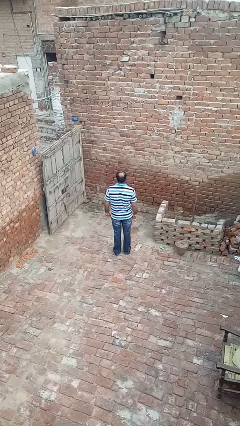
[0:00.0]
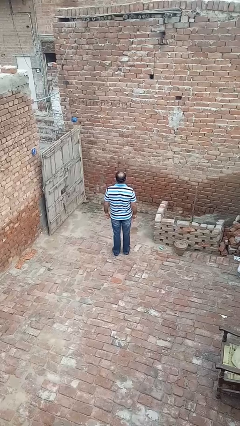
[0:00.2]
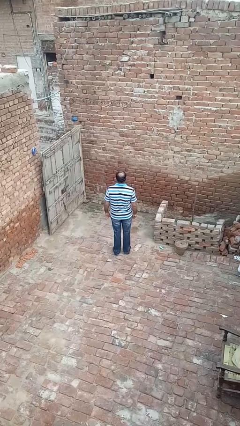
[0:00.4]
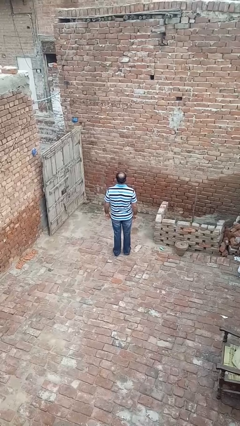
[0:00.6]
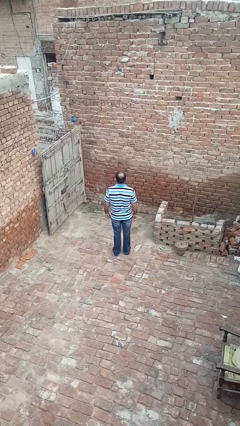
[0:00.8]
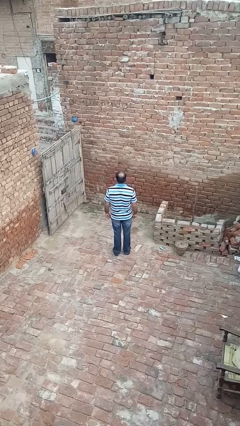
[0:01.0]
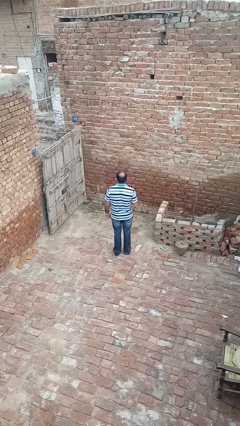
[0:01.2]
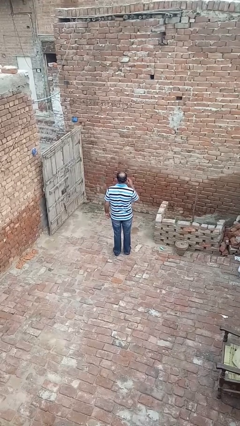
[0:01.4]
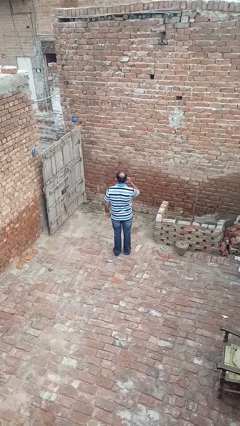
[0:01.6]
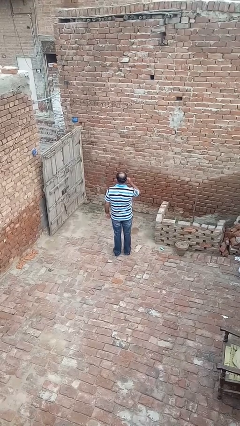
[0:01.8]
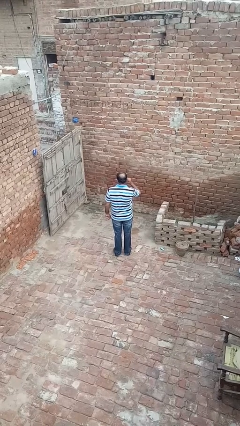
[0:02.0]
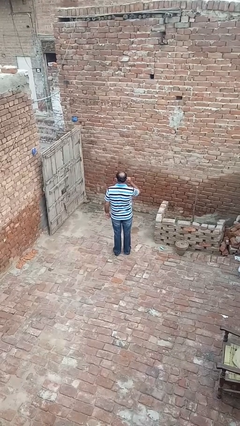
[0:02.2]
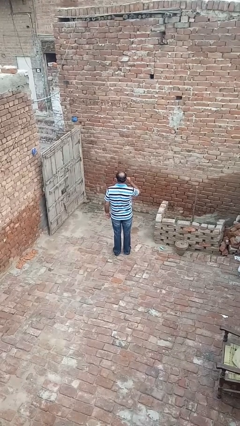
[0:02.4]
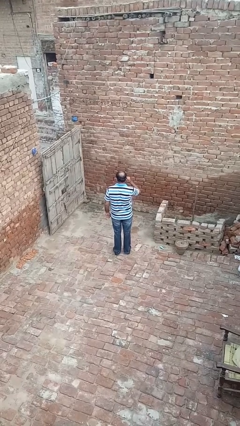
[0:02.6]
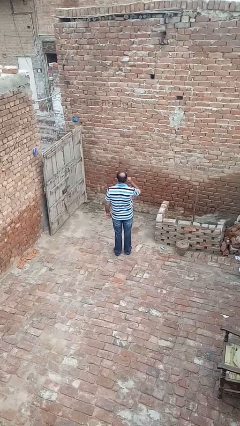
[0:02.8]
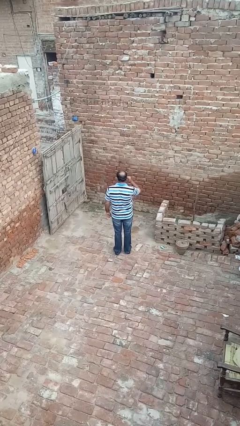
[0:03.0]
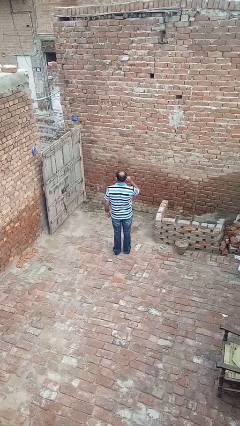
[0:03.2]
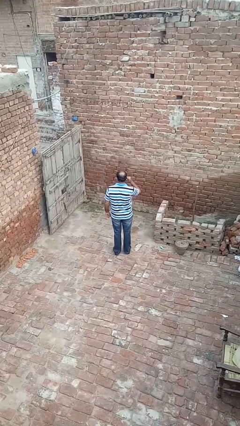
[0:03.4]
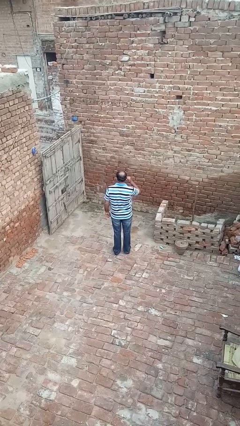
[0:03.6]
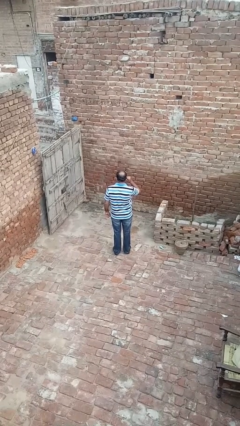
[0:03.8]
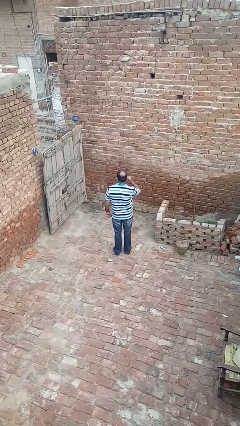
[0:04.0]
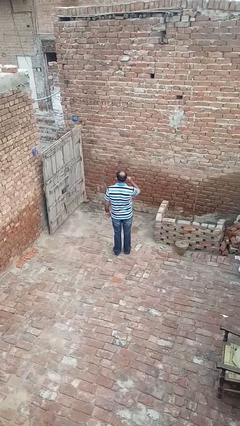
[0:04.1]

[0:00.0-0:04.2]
person touches earlobe

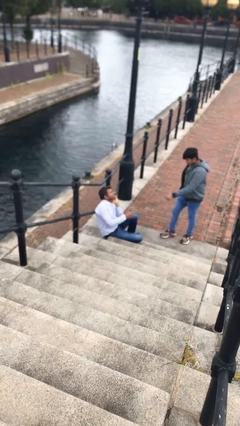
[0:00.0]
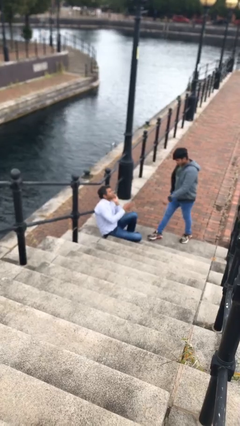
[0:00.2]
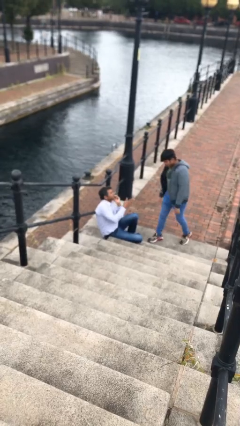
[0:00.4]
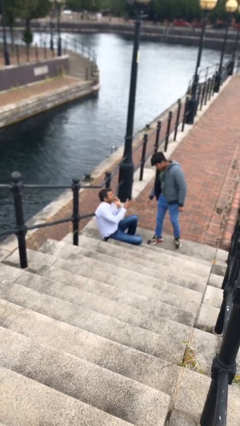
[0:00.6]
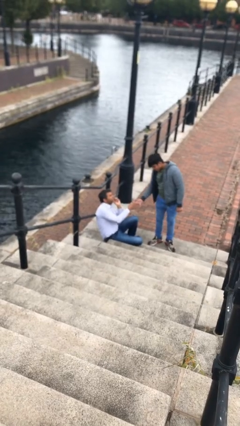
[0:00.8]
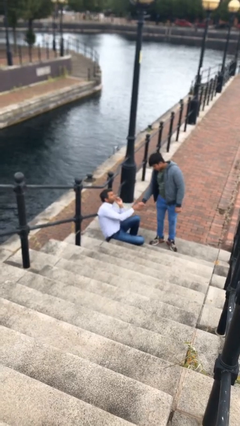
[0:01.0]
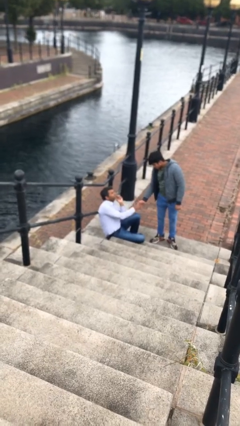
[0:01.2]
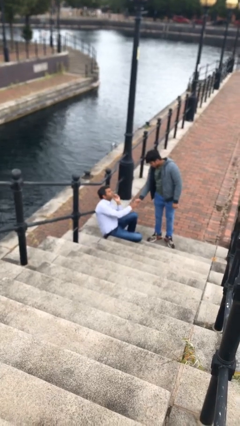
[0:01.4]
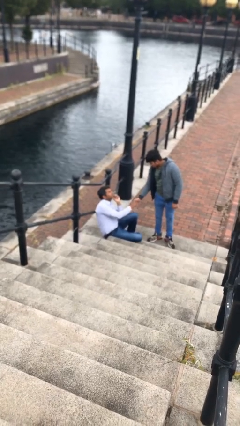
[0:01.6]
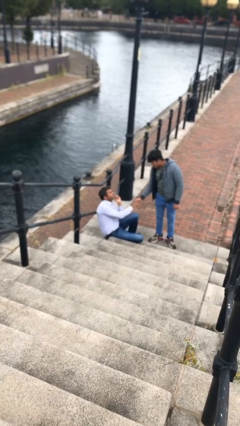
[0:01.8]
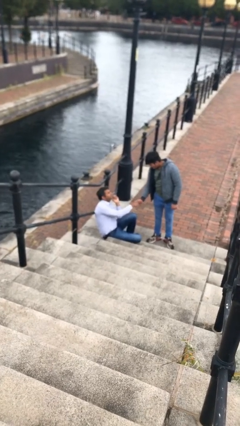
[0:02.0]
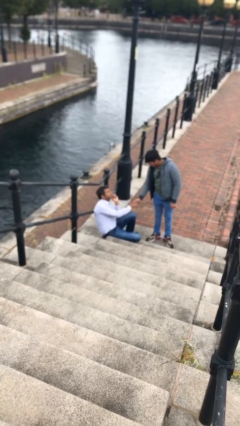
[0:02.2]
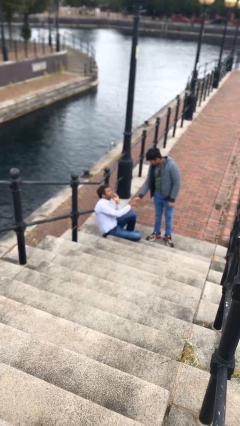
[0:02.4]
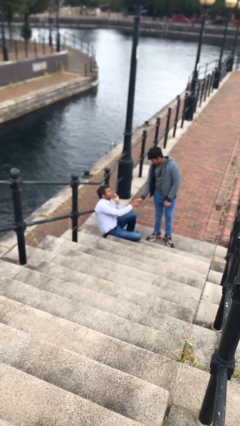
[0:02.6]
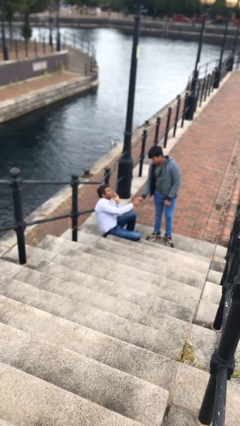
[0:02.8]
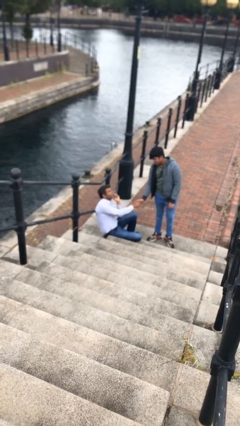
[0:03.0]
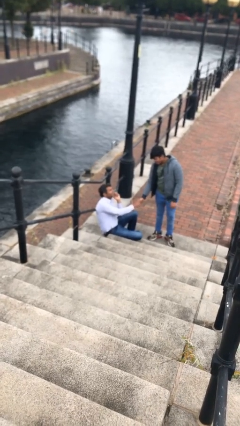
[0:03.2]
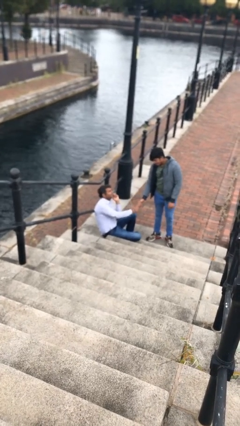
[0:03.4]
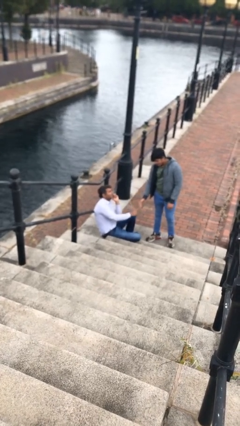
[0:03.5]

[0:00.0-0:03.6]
person shakes hand

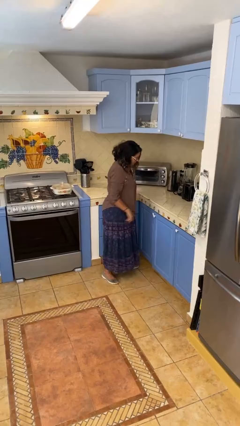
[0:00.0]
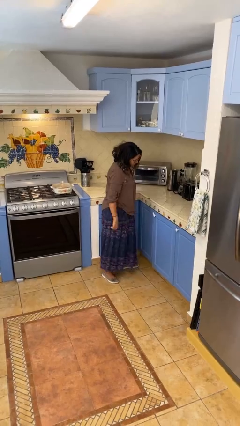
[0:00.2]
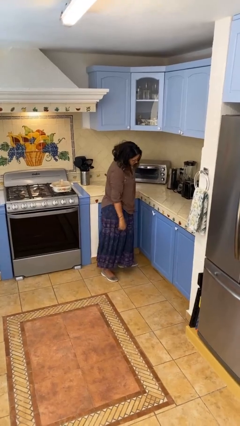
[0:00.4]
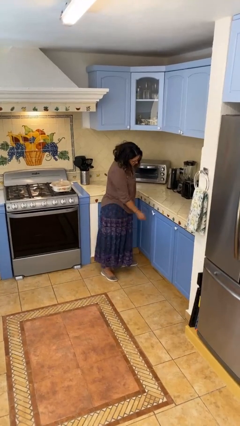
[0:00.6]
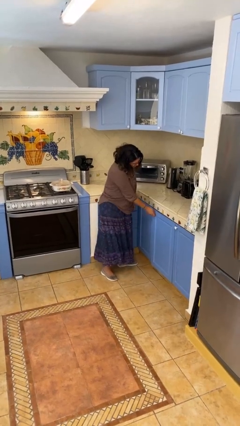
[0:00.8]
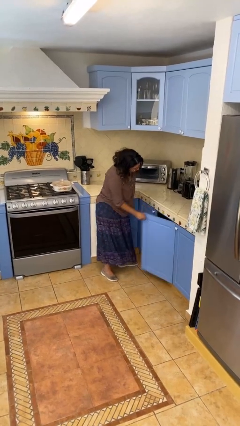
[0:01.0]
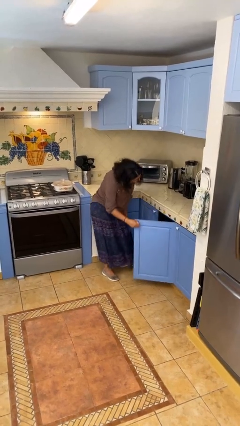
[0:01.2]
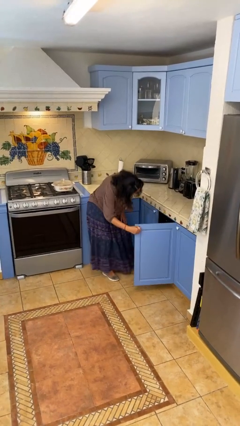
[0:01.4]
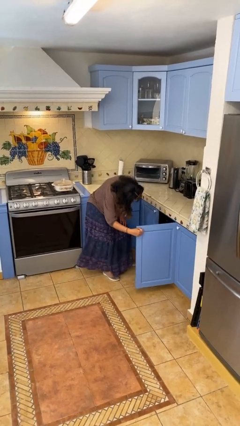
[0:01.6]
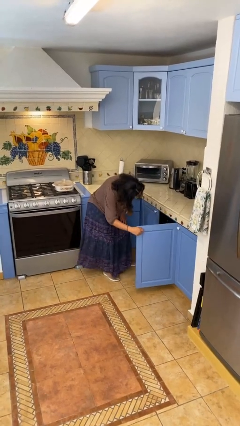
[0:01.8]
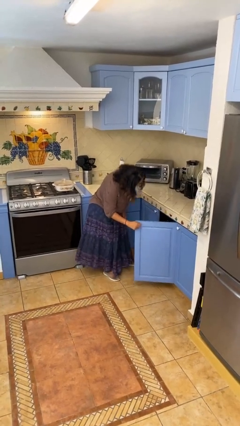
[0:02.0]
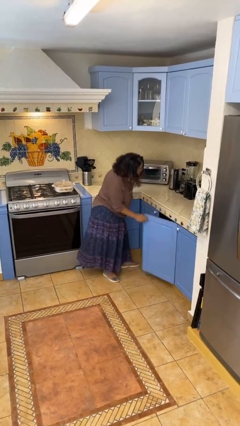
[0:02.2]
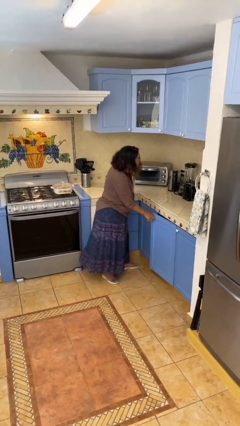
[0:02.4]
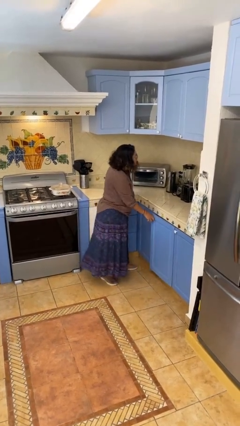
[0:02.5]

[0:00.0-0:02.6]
person closes cabinet

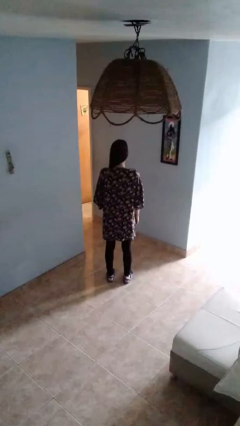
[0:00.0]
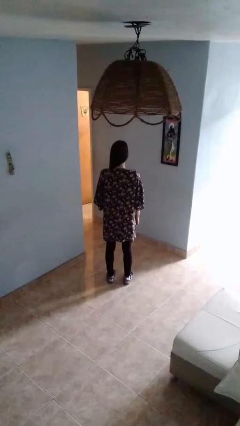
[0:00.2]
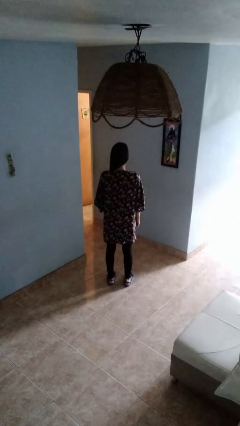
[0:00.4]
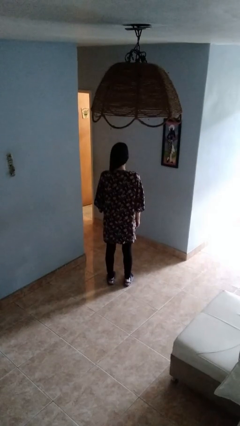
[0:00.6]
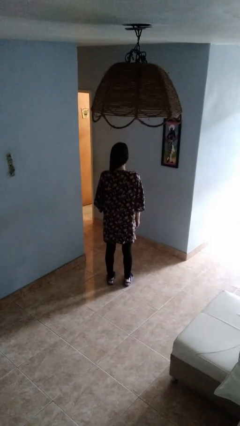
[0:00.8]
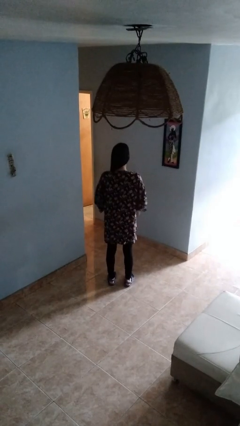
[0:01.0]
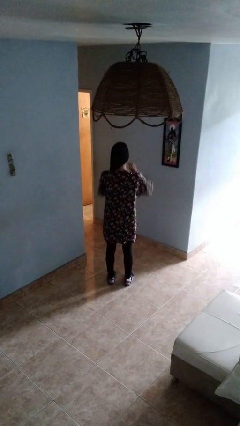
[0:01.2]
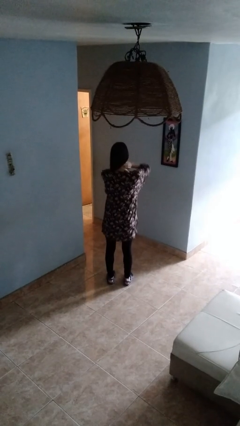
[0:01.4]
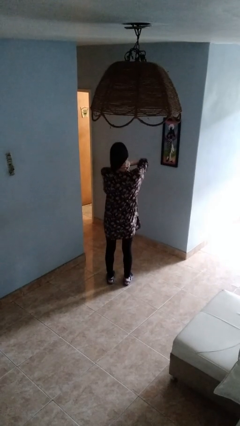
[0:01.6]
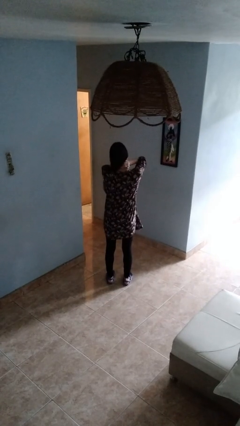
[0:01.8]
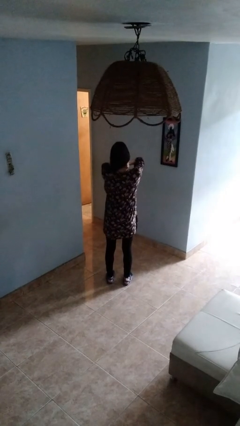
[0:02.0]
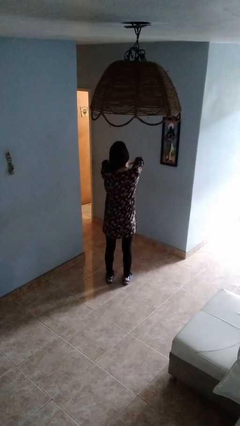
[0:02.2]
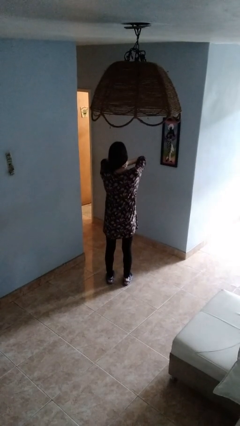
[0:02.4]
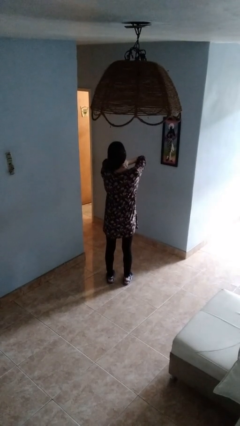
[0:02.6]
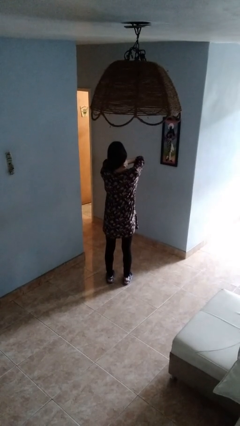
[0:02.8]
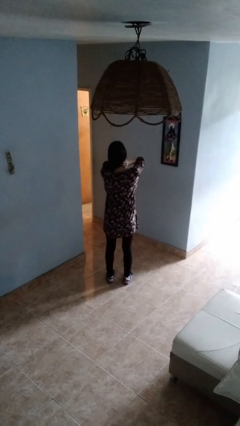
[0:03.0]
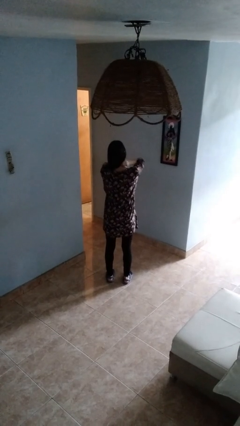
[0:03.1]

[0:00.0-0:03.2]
person rubs neck

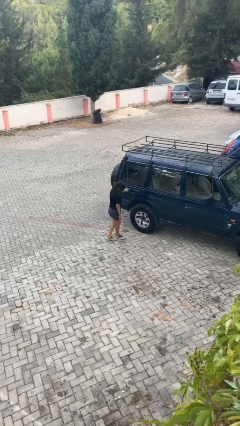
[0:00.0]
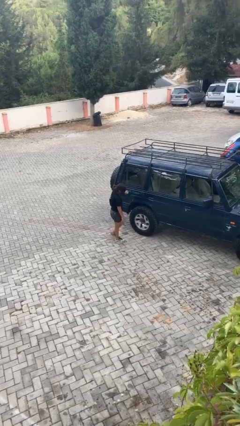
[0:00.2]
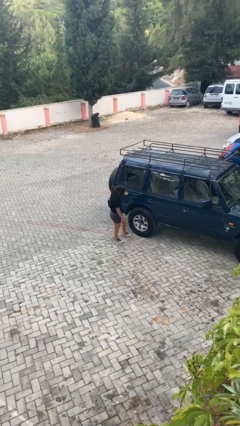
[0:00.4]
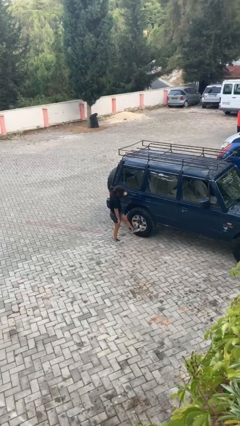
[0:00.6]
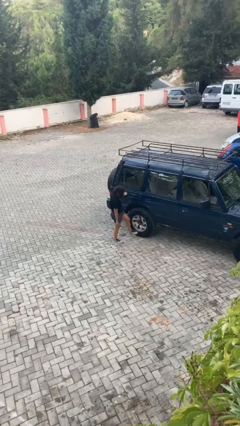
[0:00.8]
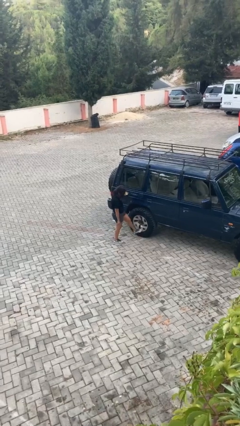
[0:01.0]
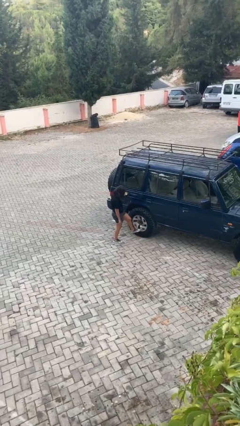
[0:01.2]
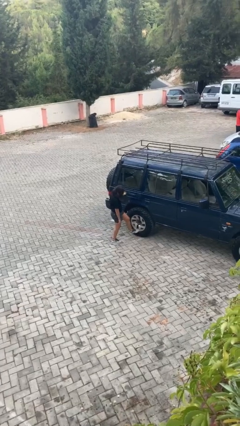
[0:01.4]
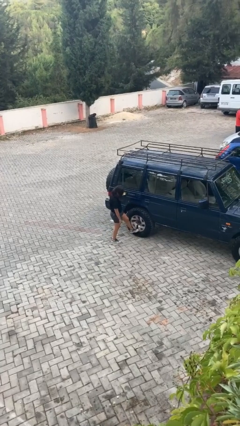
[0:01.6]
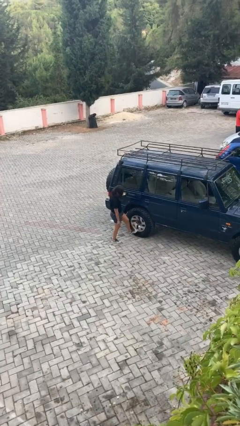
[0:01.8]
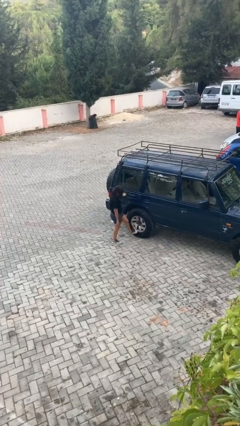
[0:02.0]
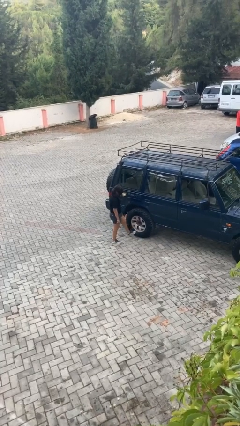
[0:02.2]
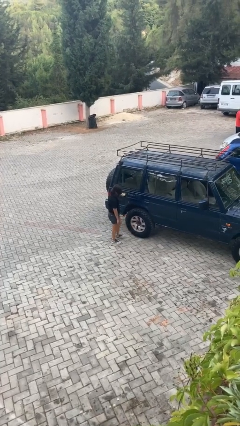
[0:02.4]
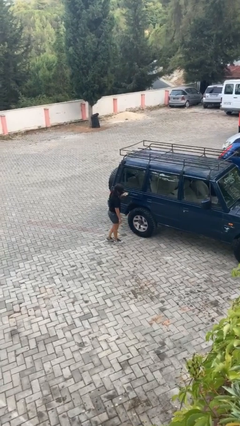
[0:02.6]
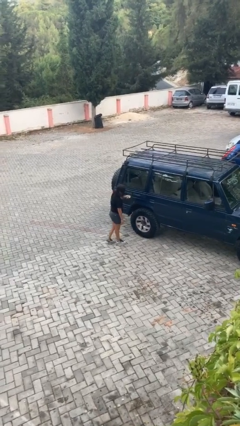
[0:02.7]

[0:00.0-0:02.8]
person kicks car tires

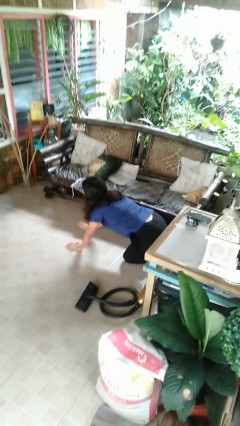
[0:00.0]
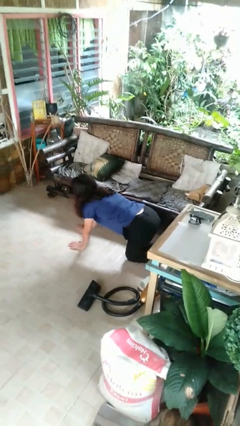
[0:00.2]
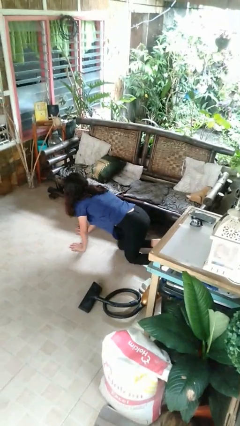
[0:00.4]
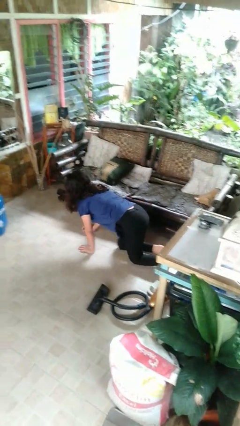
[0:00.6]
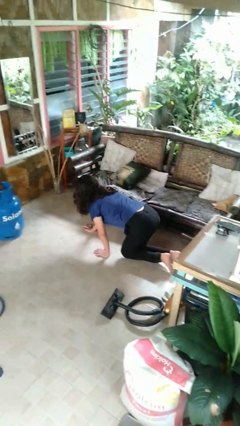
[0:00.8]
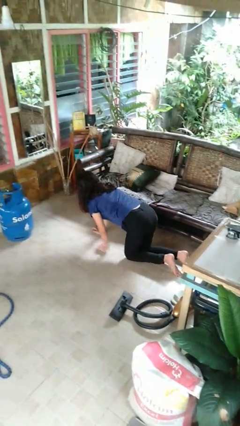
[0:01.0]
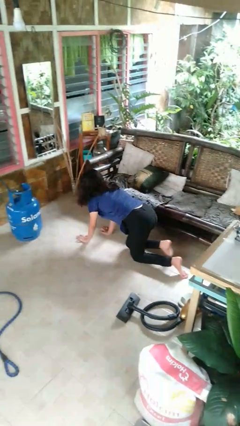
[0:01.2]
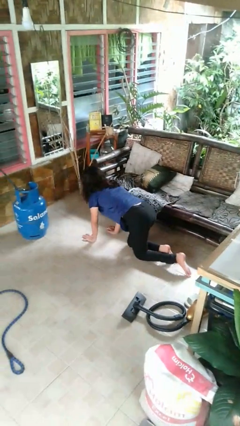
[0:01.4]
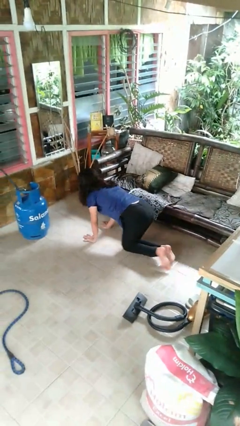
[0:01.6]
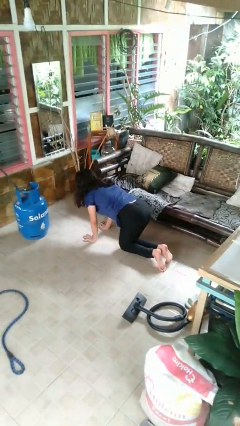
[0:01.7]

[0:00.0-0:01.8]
person crawls
